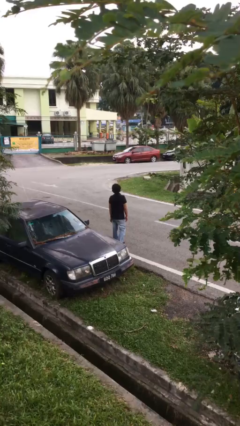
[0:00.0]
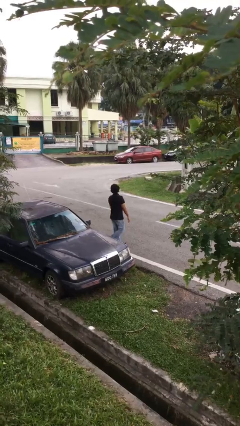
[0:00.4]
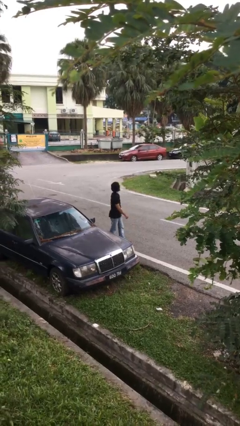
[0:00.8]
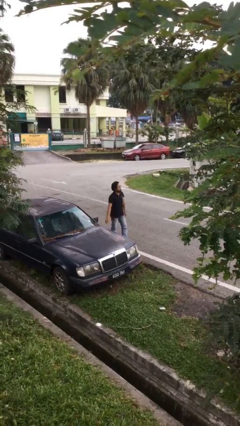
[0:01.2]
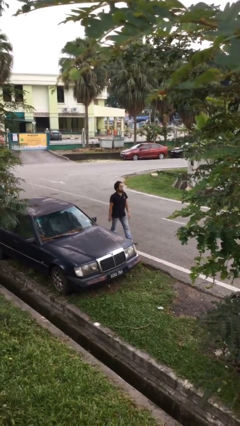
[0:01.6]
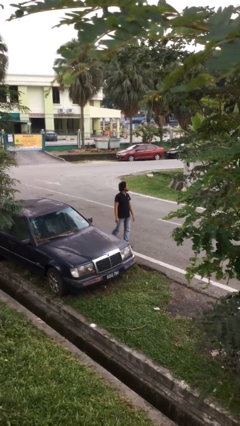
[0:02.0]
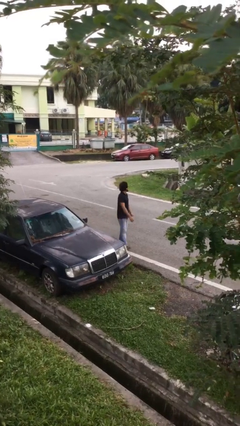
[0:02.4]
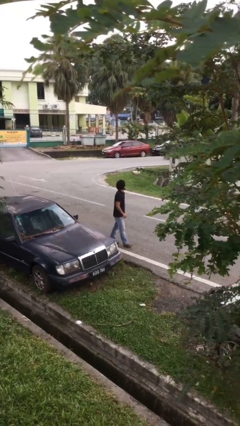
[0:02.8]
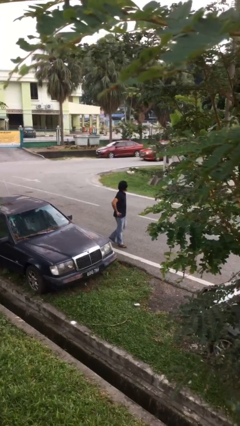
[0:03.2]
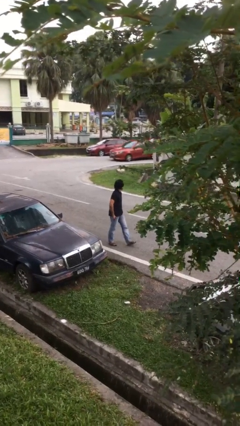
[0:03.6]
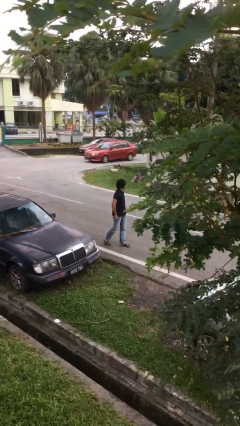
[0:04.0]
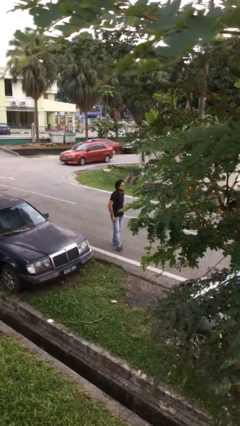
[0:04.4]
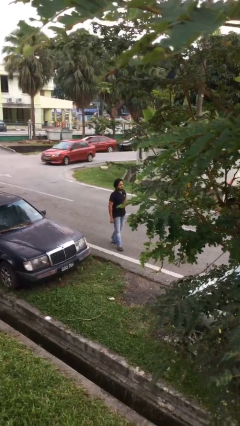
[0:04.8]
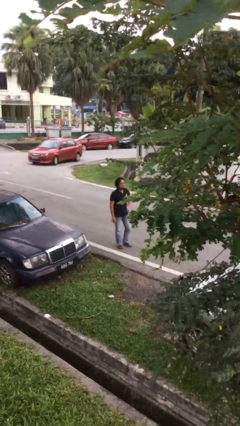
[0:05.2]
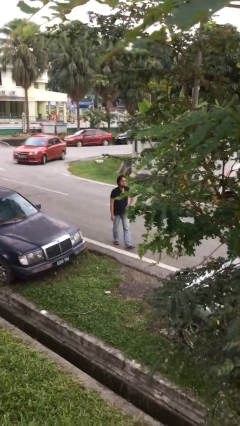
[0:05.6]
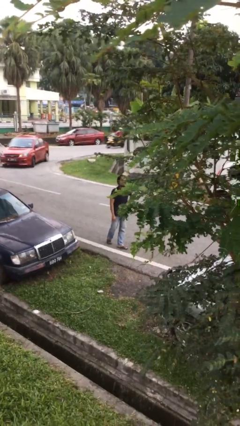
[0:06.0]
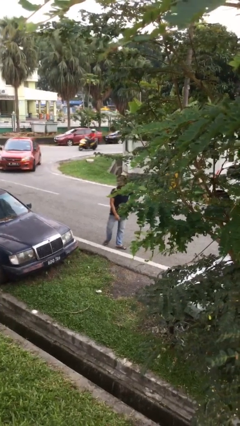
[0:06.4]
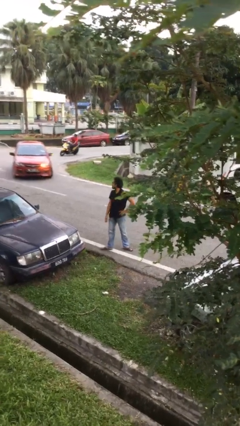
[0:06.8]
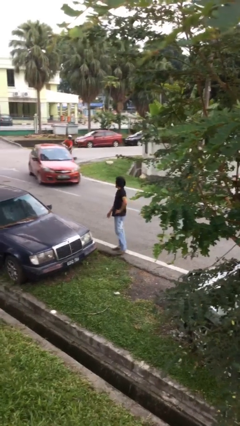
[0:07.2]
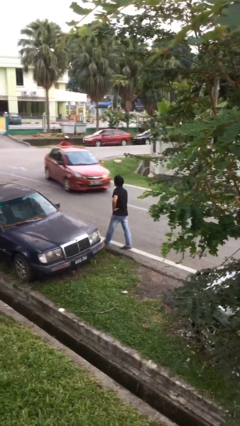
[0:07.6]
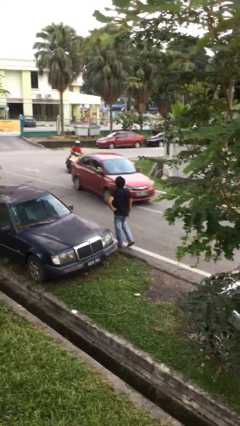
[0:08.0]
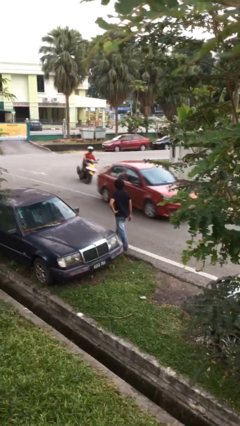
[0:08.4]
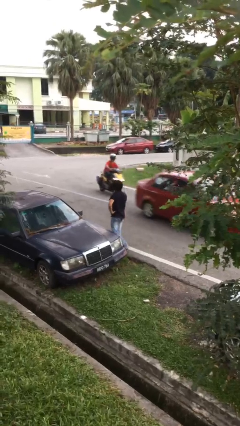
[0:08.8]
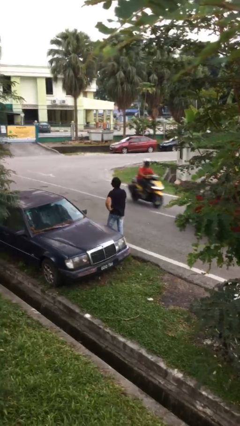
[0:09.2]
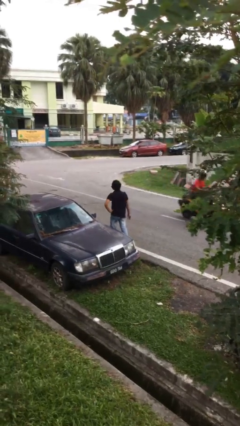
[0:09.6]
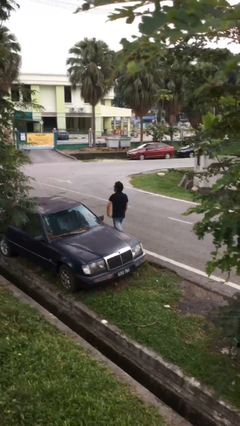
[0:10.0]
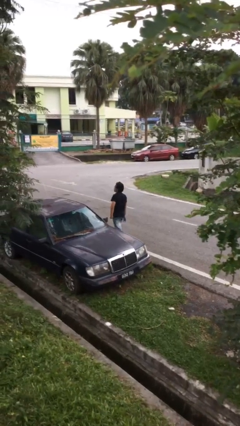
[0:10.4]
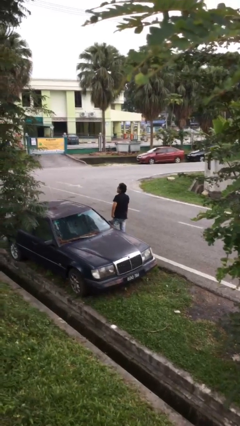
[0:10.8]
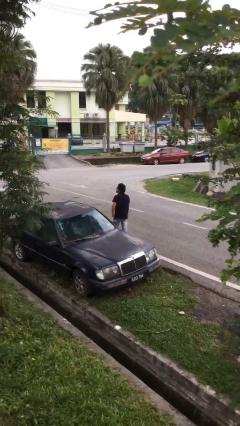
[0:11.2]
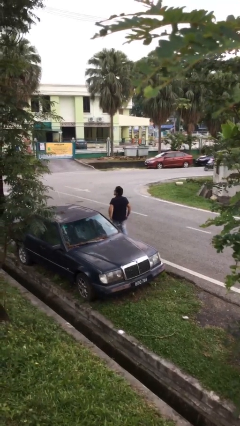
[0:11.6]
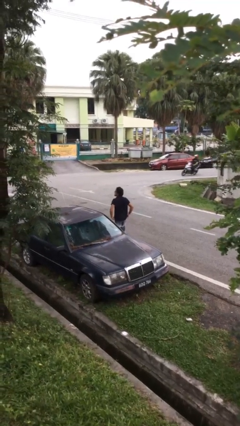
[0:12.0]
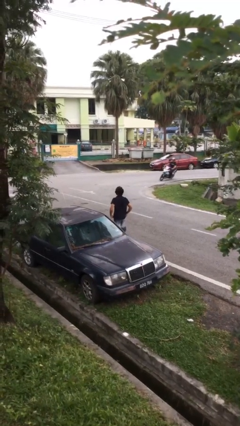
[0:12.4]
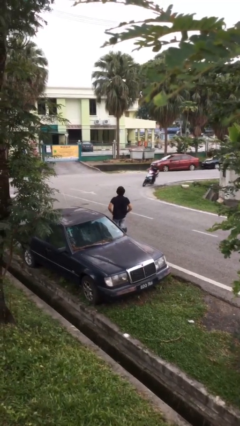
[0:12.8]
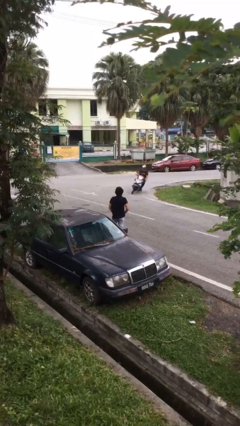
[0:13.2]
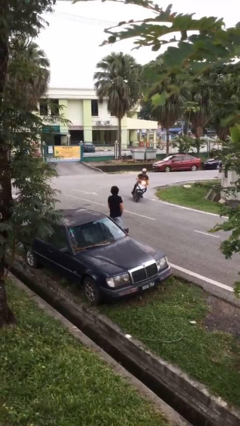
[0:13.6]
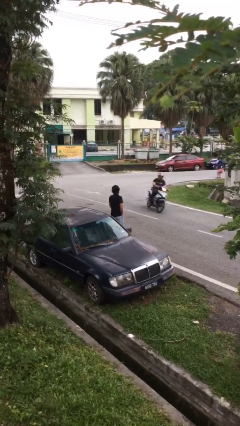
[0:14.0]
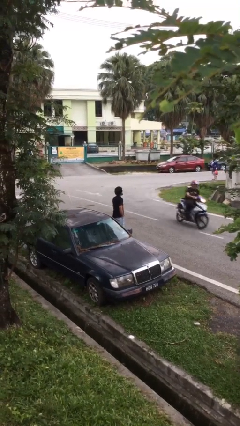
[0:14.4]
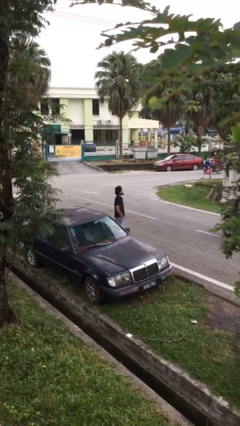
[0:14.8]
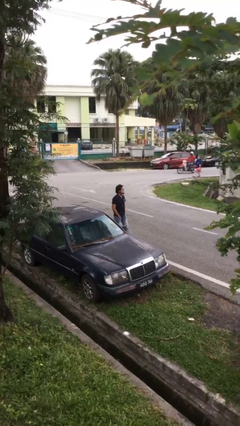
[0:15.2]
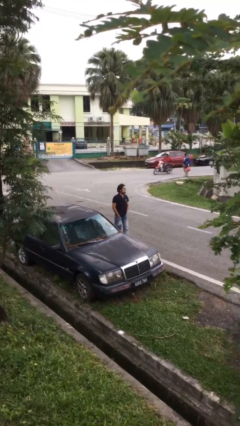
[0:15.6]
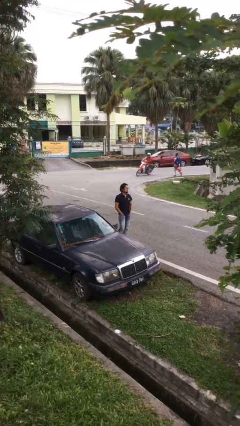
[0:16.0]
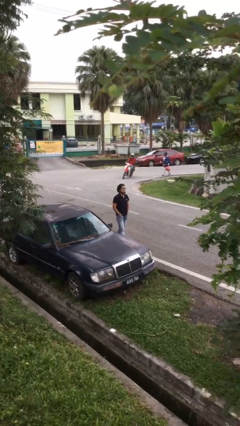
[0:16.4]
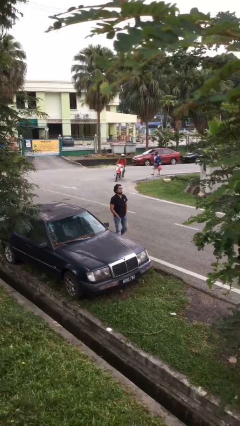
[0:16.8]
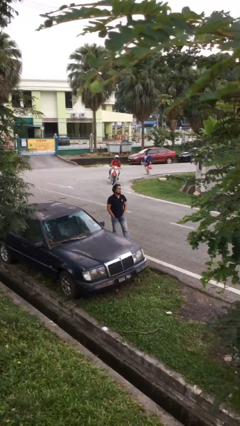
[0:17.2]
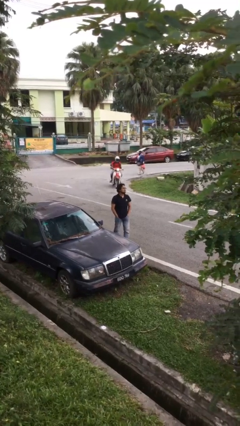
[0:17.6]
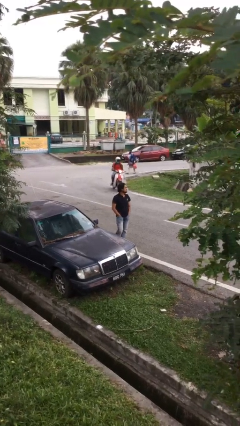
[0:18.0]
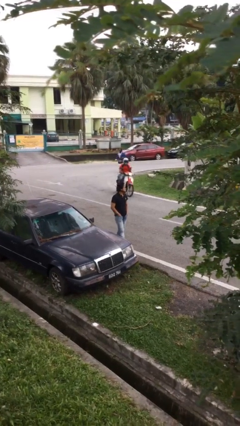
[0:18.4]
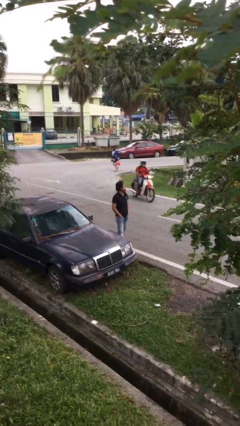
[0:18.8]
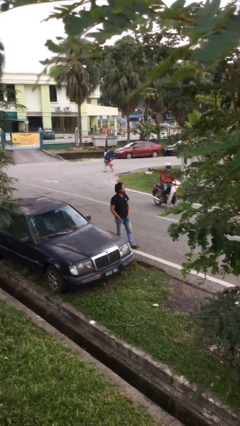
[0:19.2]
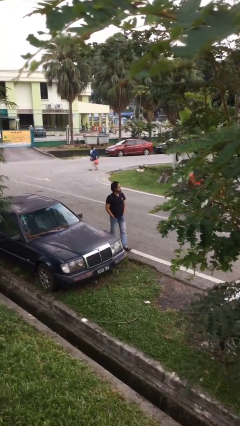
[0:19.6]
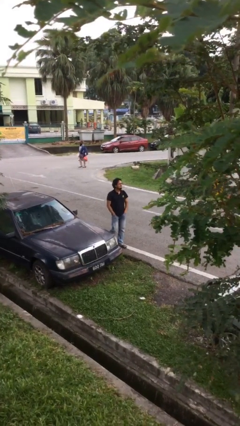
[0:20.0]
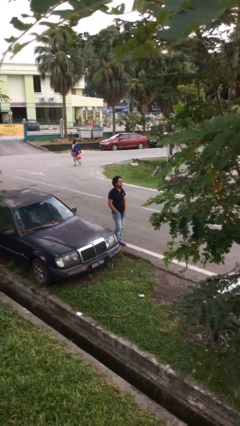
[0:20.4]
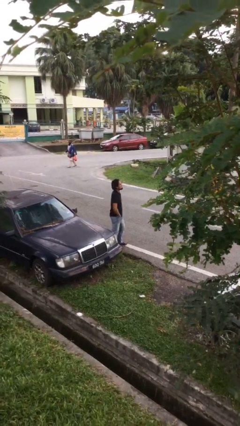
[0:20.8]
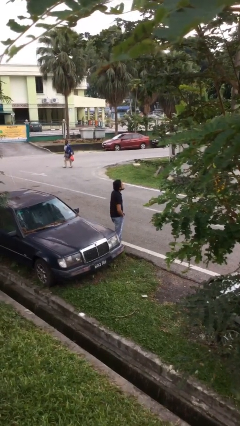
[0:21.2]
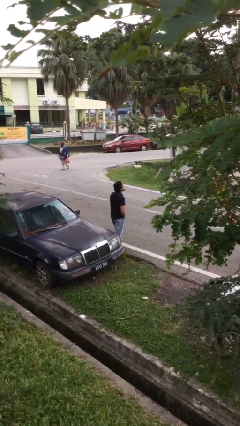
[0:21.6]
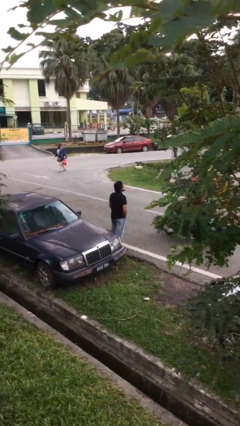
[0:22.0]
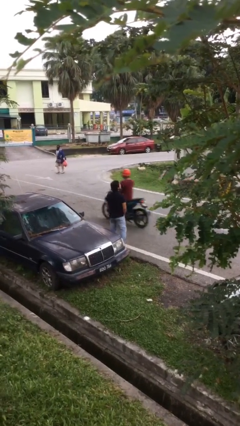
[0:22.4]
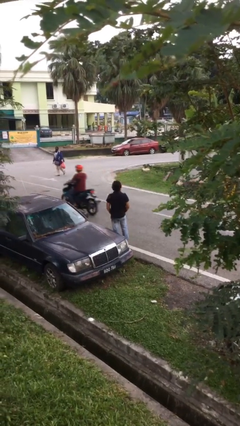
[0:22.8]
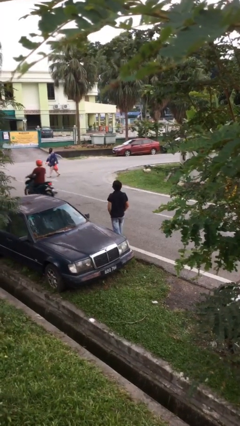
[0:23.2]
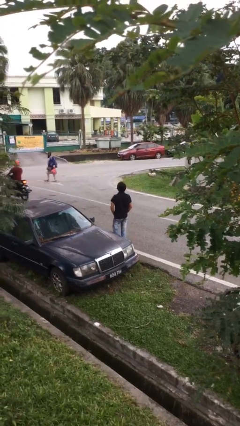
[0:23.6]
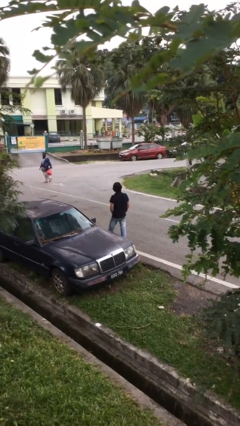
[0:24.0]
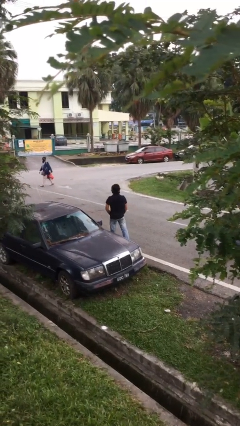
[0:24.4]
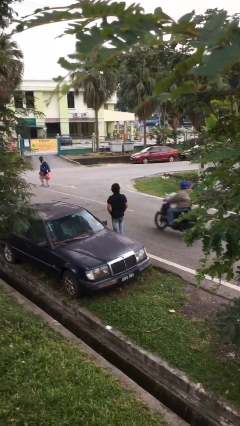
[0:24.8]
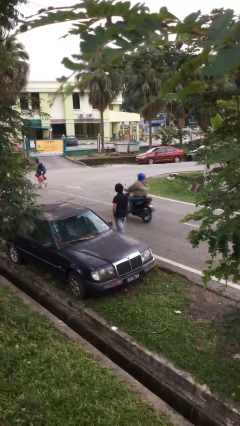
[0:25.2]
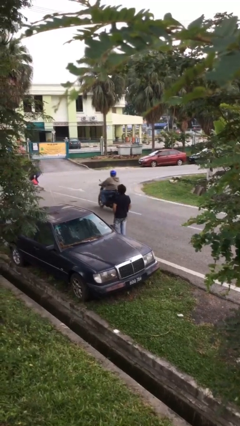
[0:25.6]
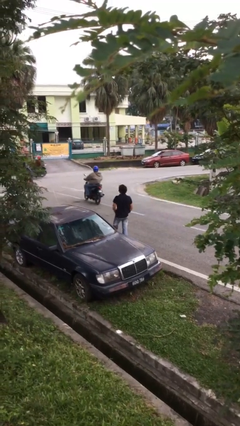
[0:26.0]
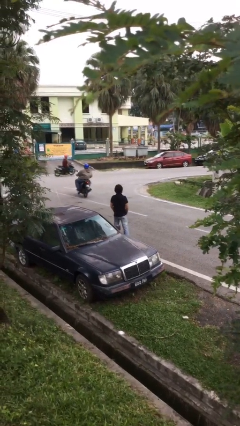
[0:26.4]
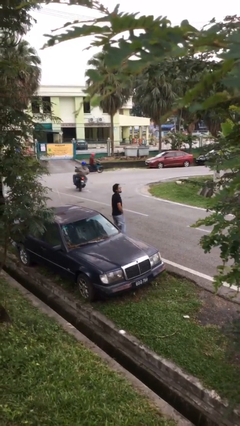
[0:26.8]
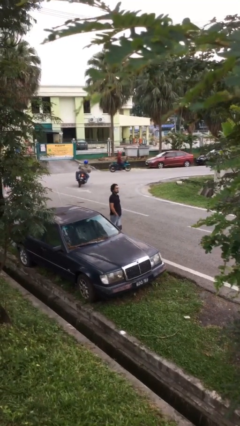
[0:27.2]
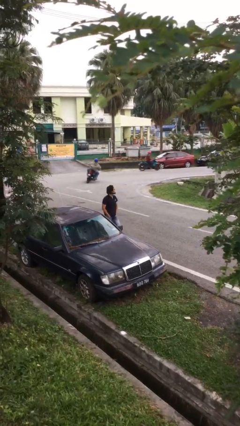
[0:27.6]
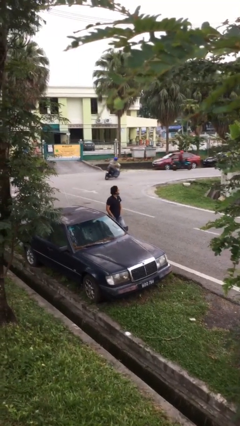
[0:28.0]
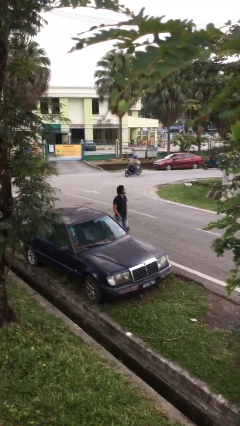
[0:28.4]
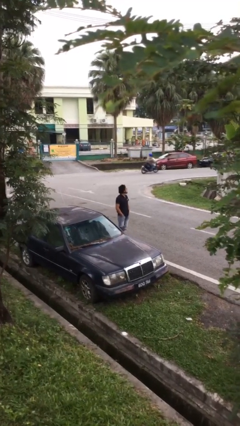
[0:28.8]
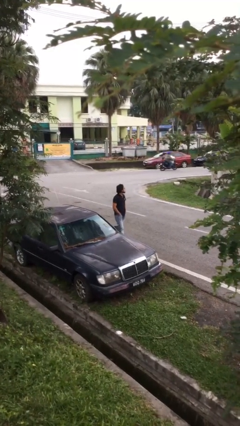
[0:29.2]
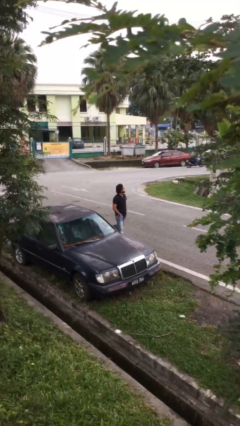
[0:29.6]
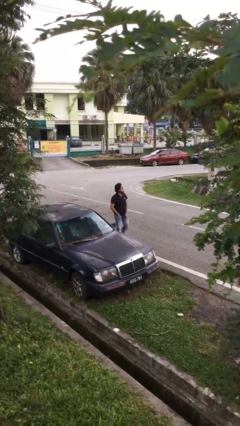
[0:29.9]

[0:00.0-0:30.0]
person walks

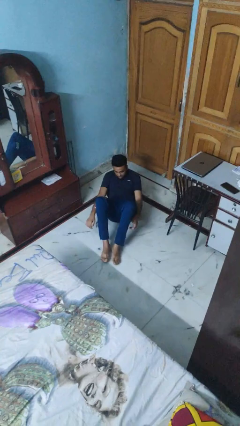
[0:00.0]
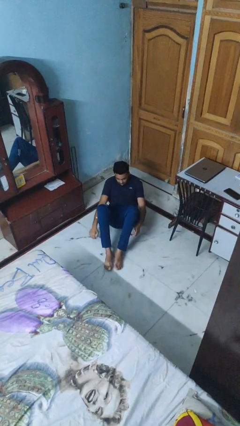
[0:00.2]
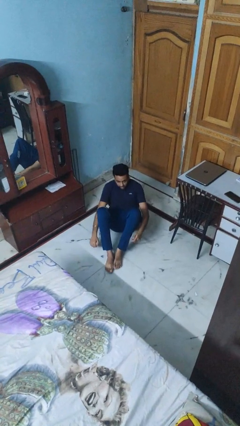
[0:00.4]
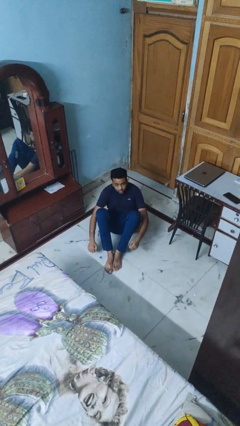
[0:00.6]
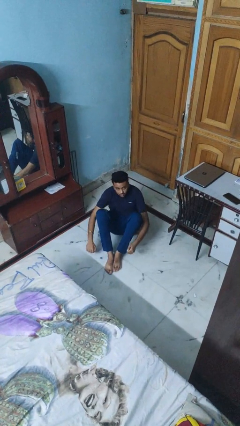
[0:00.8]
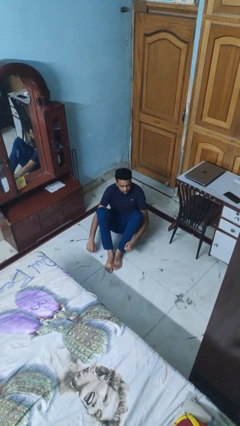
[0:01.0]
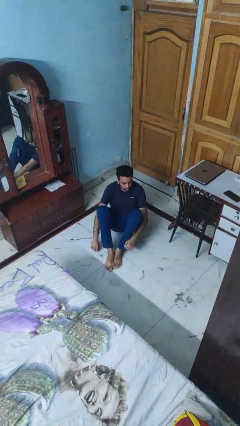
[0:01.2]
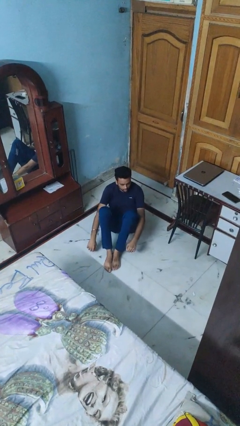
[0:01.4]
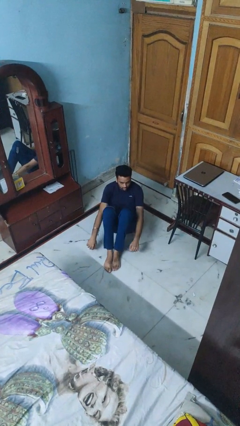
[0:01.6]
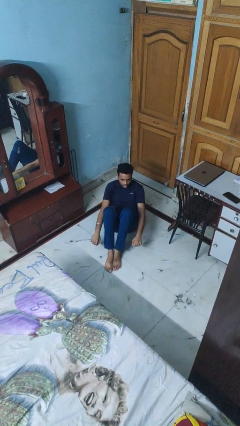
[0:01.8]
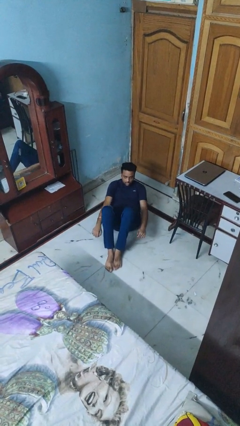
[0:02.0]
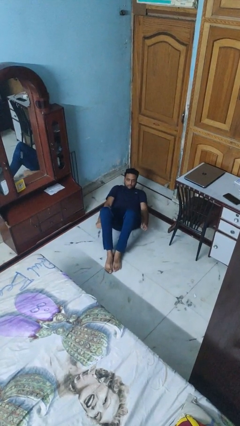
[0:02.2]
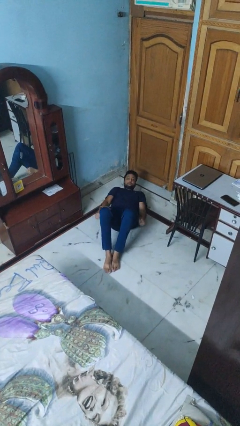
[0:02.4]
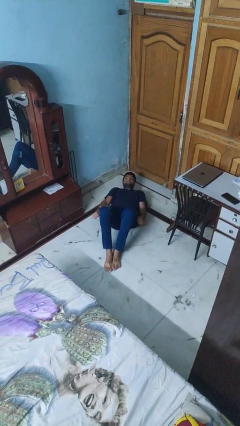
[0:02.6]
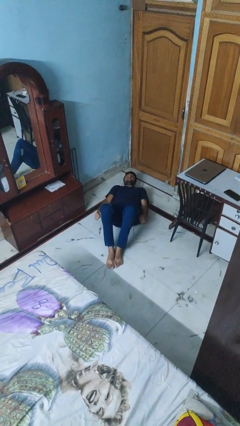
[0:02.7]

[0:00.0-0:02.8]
person exercises with situp

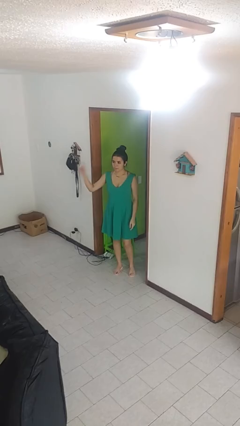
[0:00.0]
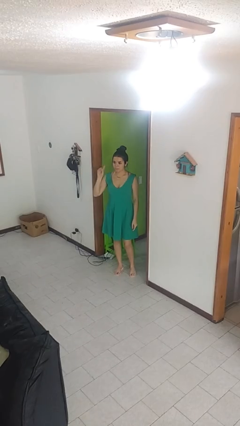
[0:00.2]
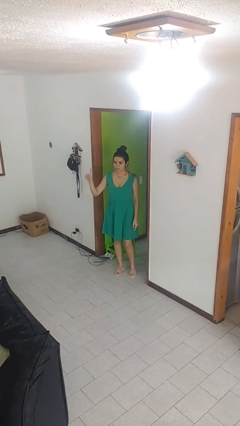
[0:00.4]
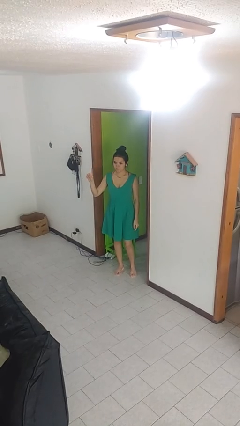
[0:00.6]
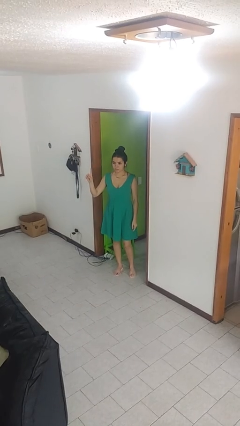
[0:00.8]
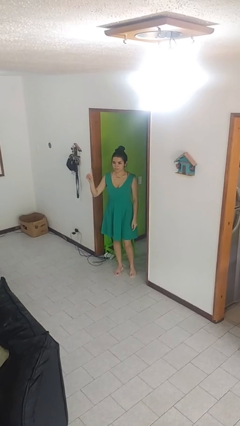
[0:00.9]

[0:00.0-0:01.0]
person gestures number one
